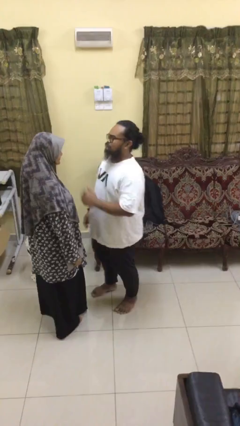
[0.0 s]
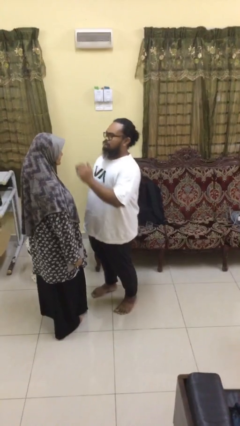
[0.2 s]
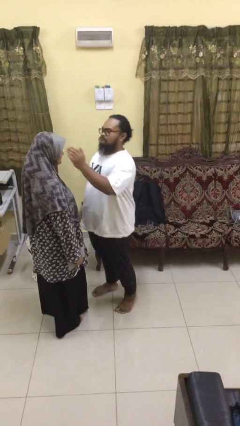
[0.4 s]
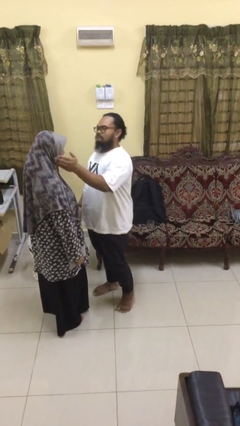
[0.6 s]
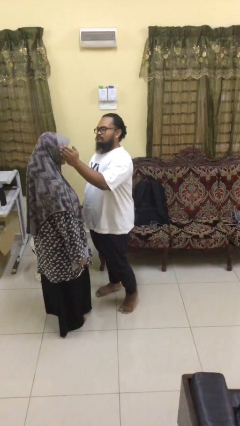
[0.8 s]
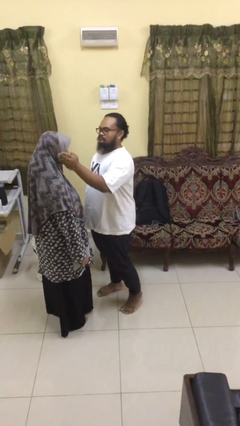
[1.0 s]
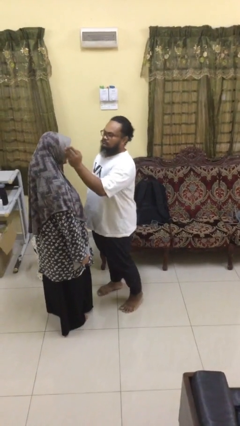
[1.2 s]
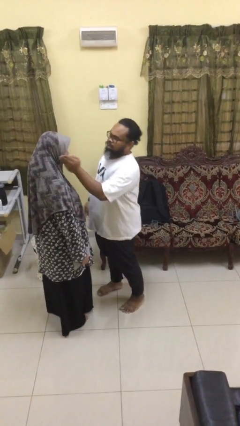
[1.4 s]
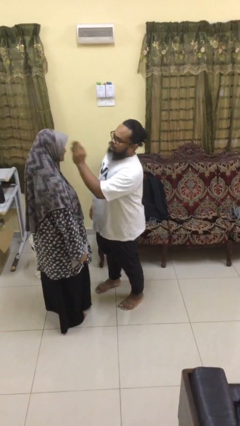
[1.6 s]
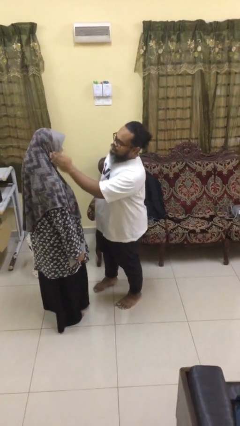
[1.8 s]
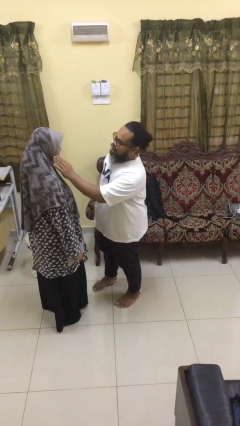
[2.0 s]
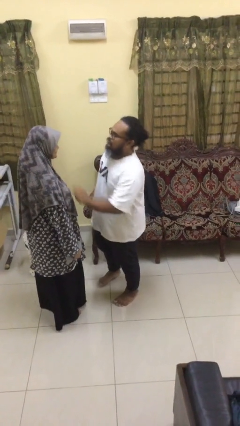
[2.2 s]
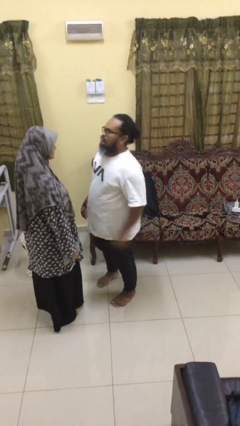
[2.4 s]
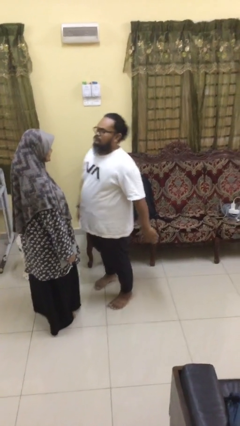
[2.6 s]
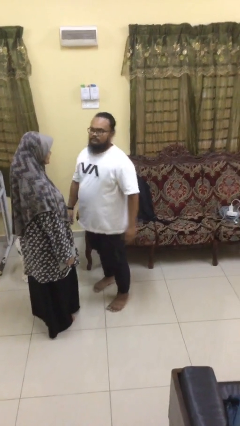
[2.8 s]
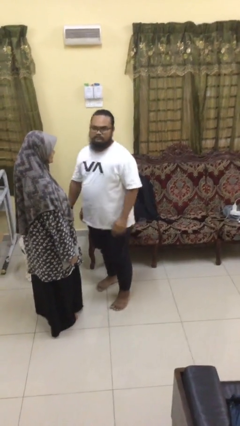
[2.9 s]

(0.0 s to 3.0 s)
person touches face of person

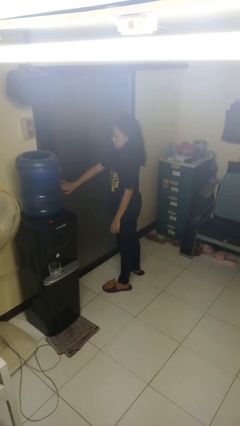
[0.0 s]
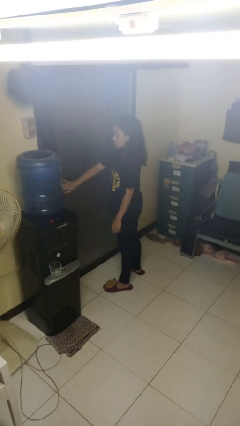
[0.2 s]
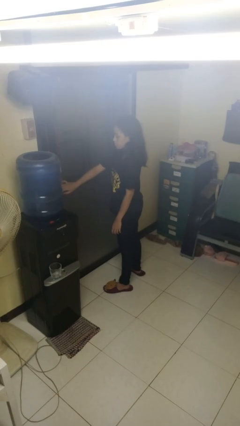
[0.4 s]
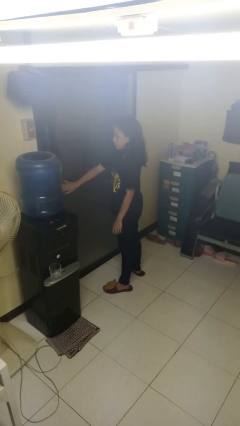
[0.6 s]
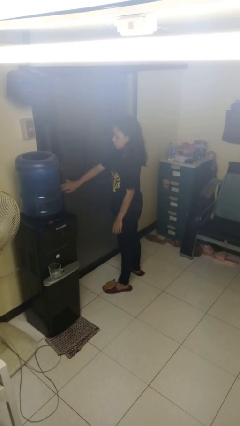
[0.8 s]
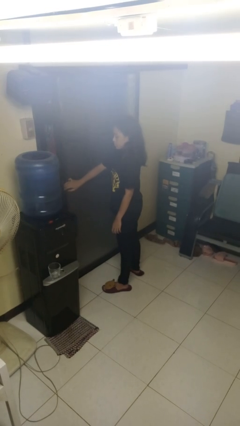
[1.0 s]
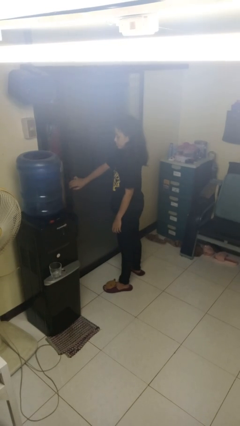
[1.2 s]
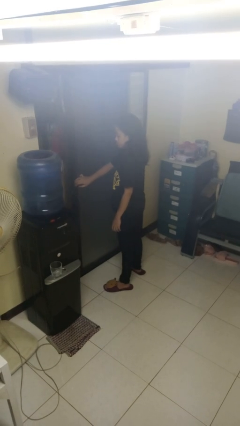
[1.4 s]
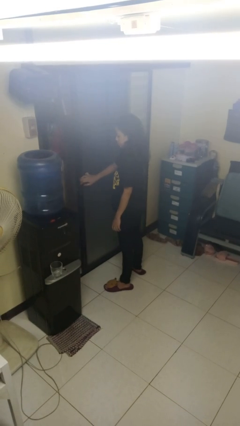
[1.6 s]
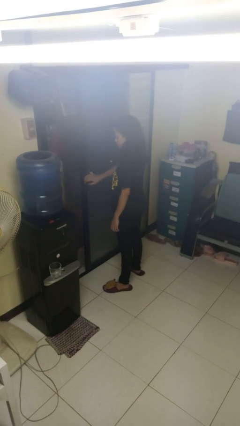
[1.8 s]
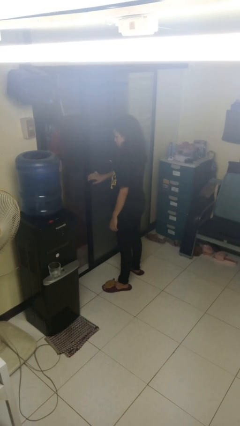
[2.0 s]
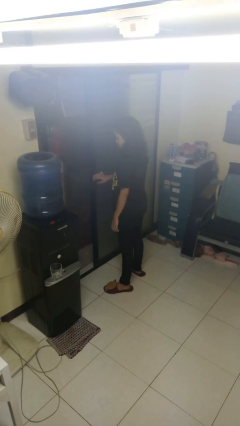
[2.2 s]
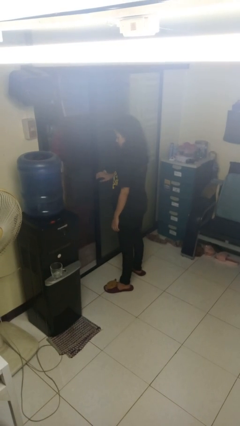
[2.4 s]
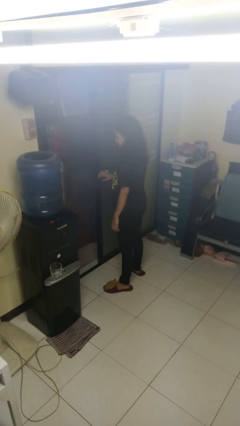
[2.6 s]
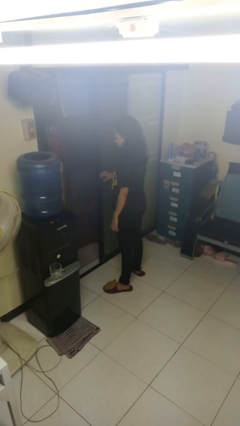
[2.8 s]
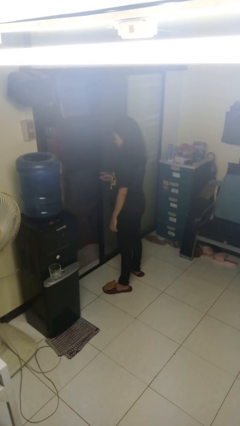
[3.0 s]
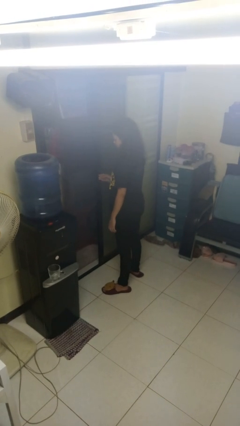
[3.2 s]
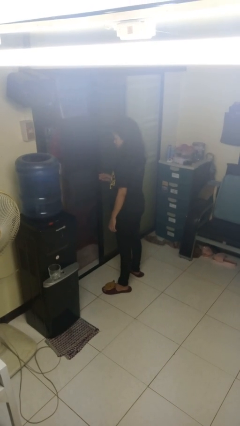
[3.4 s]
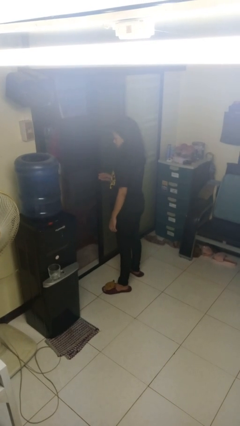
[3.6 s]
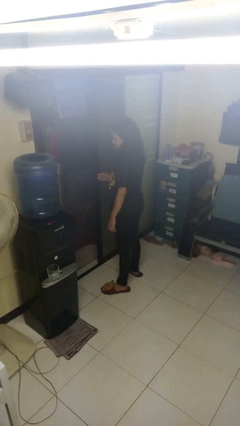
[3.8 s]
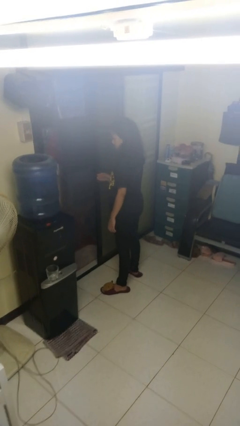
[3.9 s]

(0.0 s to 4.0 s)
person opens sliding door

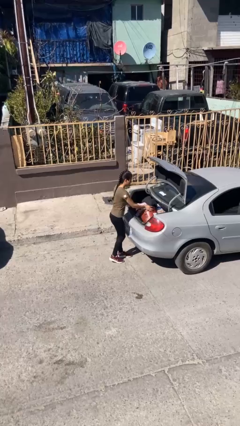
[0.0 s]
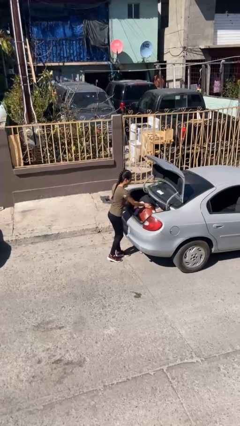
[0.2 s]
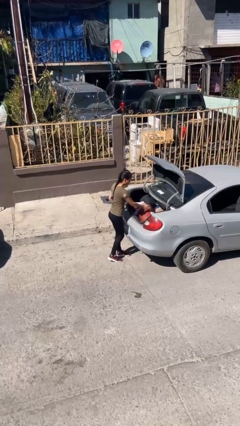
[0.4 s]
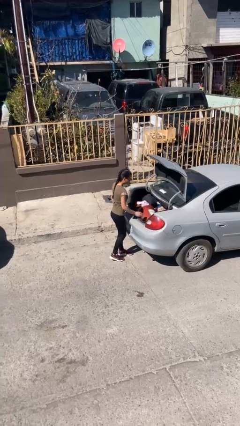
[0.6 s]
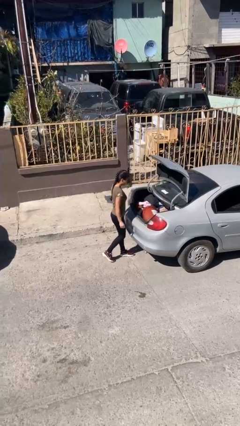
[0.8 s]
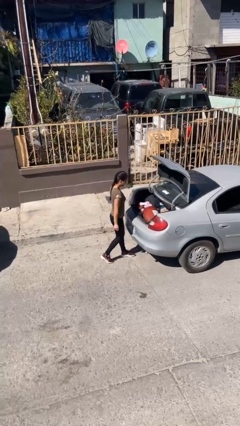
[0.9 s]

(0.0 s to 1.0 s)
person loads car

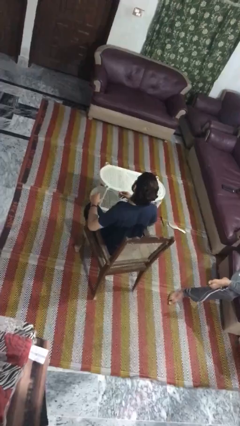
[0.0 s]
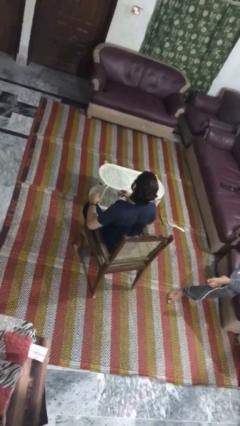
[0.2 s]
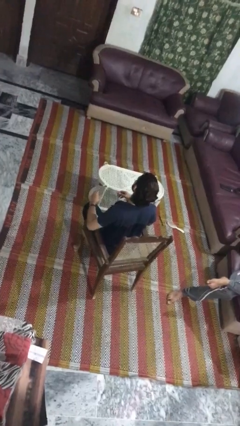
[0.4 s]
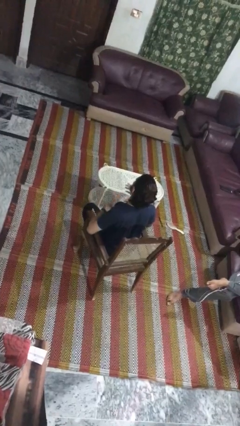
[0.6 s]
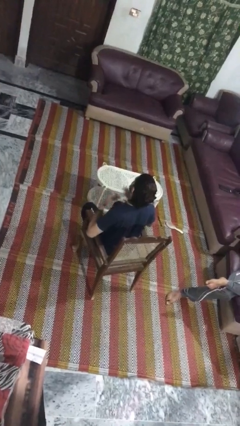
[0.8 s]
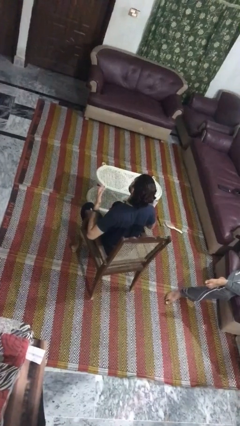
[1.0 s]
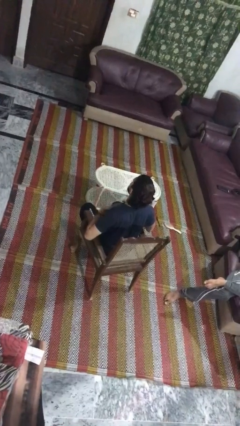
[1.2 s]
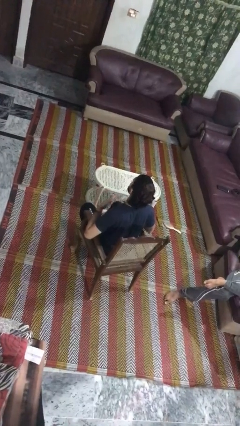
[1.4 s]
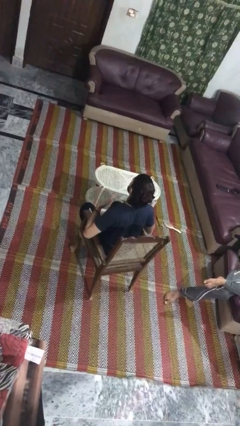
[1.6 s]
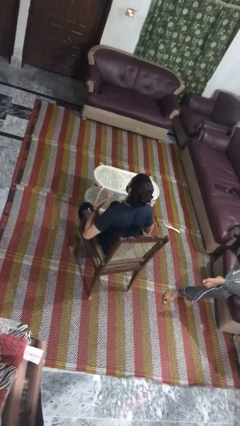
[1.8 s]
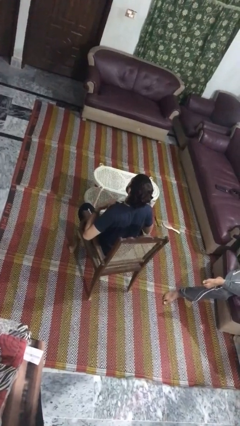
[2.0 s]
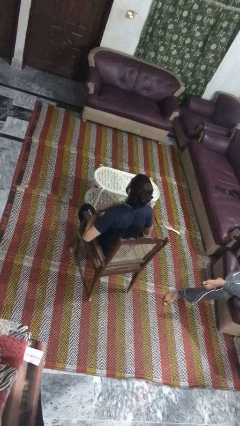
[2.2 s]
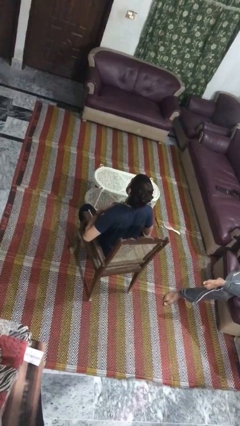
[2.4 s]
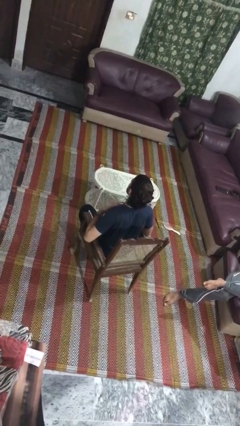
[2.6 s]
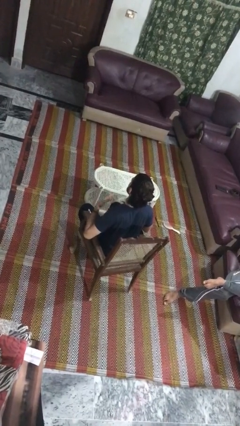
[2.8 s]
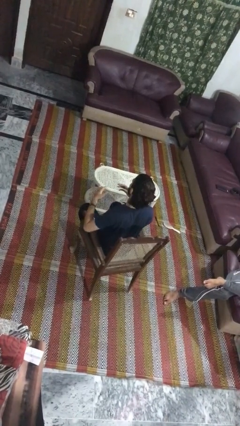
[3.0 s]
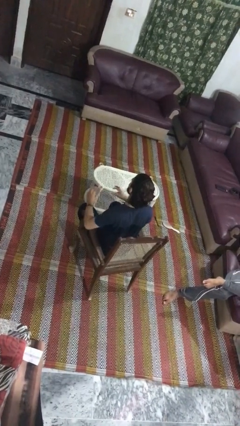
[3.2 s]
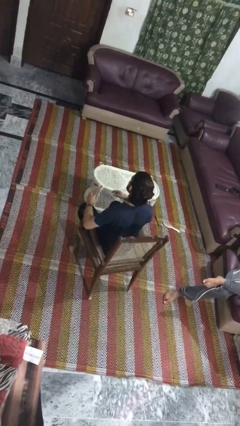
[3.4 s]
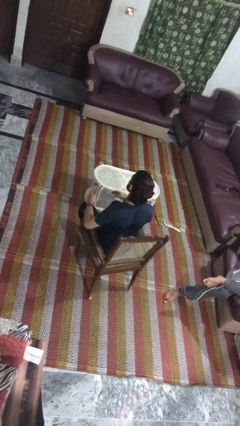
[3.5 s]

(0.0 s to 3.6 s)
person drums on chest

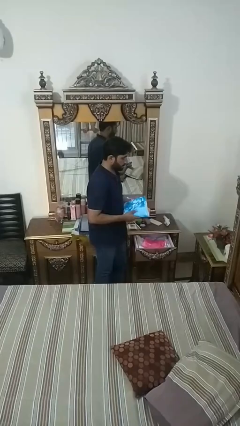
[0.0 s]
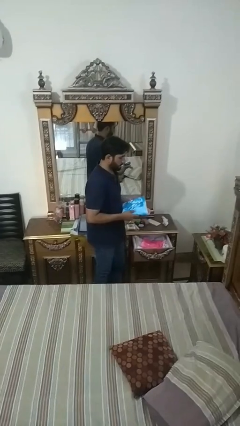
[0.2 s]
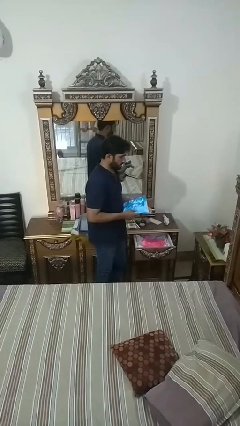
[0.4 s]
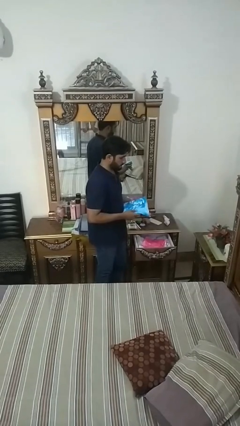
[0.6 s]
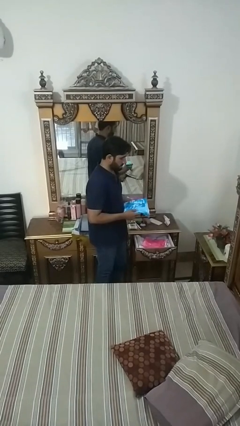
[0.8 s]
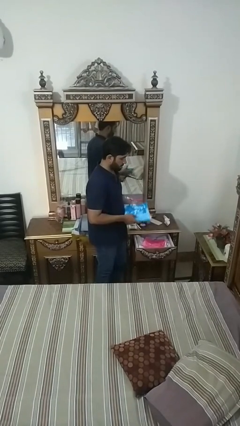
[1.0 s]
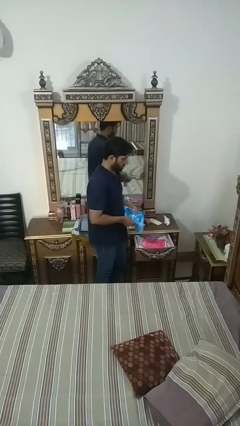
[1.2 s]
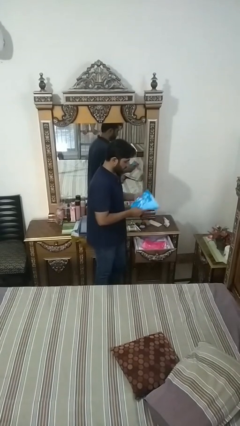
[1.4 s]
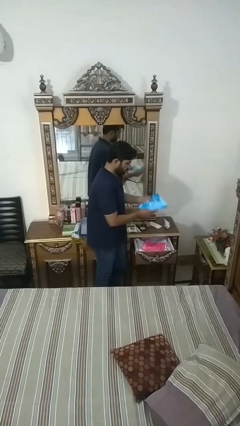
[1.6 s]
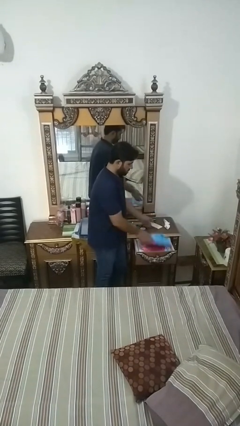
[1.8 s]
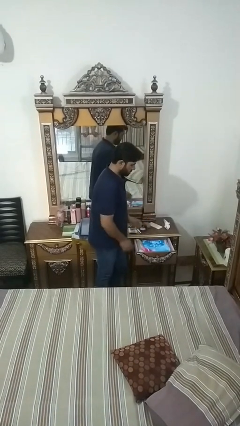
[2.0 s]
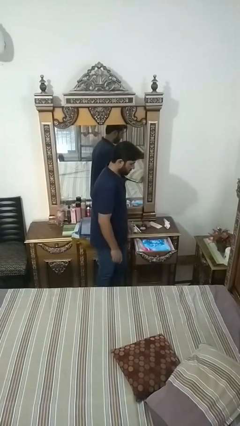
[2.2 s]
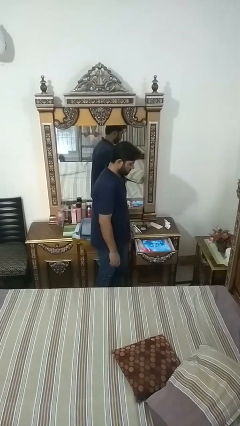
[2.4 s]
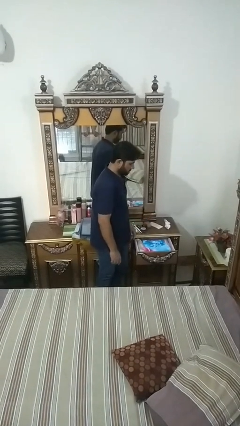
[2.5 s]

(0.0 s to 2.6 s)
person puts clothes into dresser

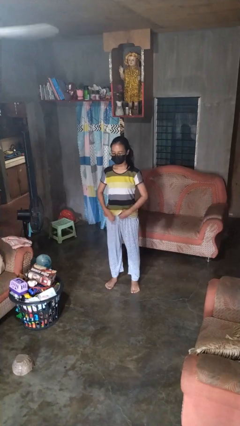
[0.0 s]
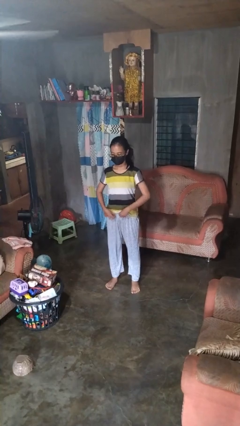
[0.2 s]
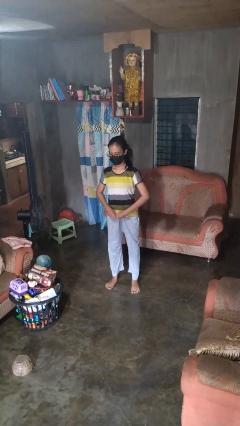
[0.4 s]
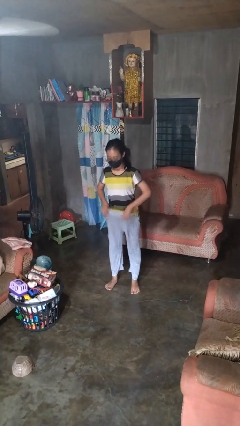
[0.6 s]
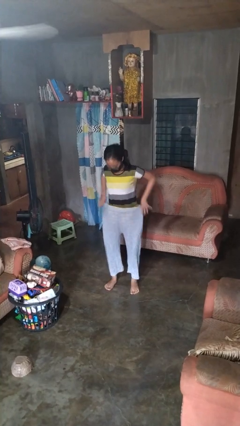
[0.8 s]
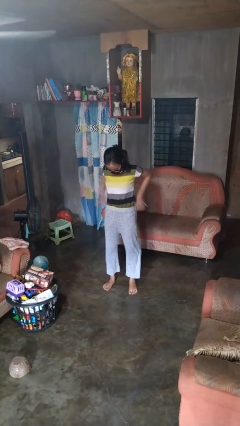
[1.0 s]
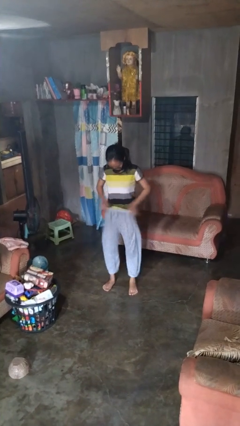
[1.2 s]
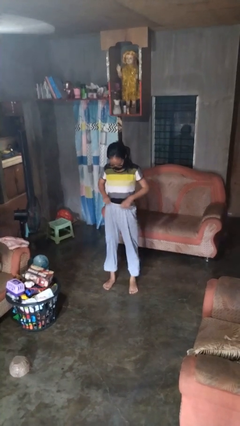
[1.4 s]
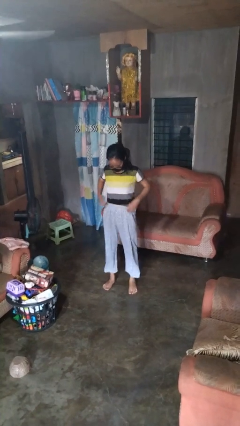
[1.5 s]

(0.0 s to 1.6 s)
person tucks in shirt

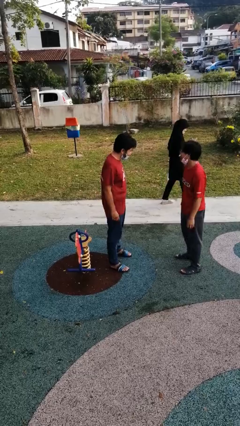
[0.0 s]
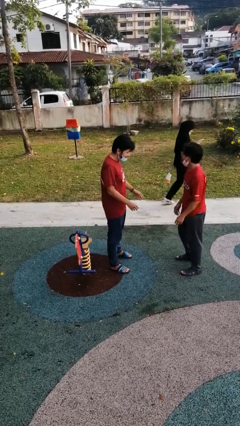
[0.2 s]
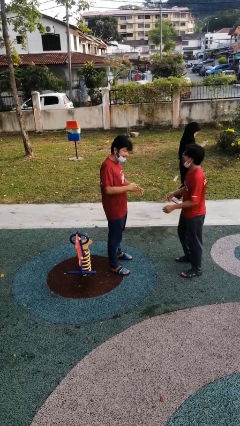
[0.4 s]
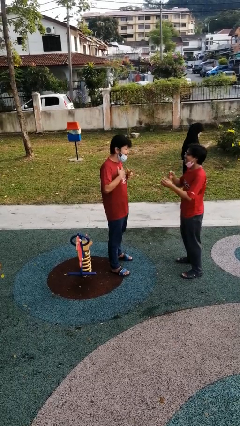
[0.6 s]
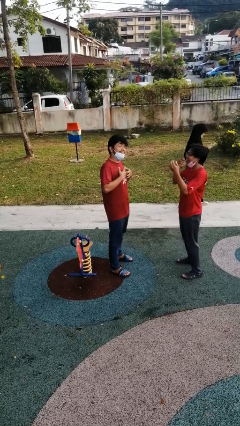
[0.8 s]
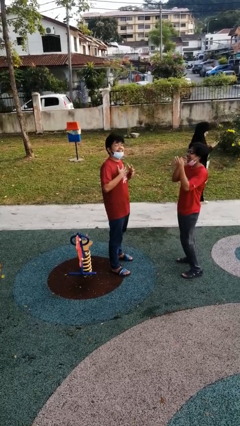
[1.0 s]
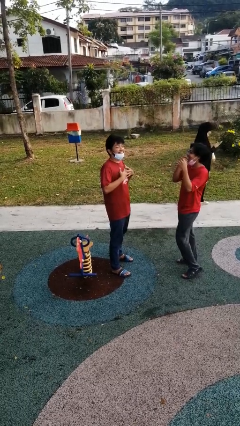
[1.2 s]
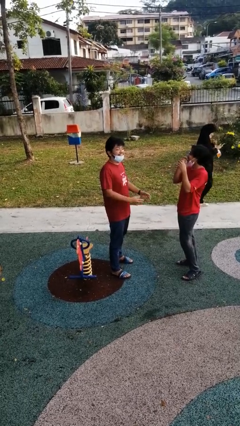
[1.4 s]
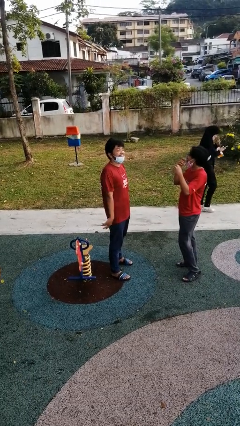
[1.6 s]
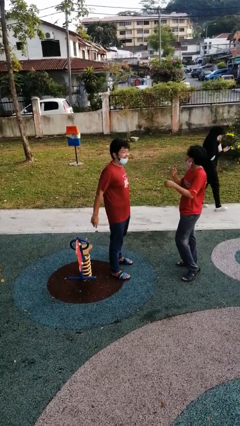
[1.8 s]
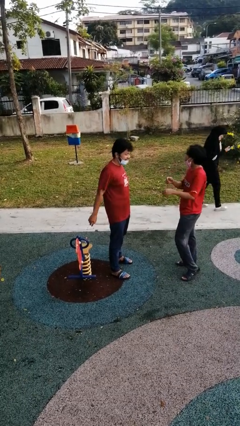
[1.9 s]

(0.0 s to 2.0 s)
person laughs with person
